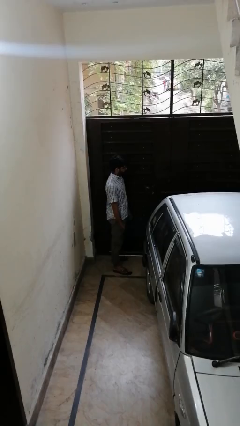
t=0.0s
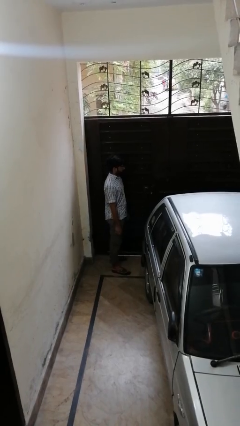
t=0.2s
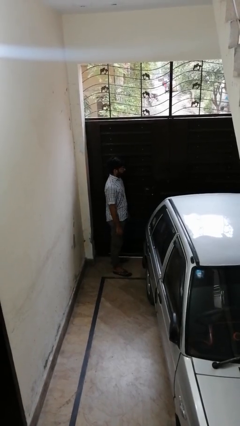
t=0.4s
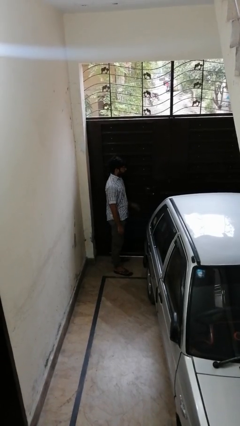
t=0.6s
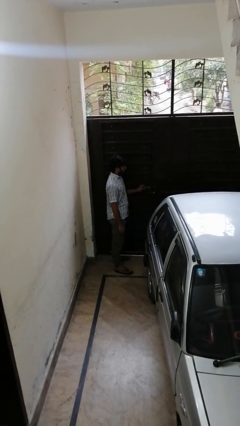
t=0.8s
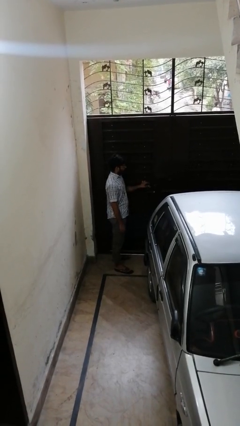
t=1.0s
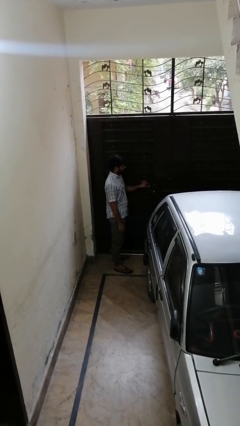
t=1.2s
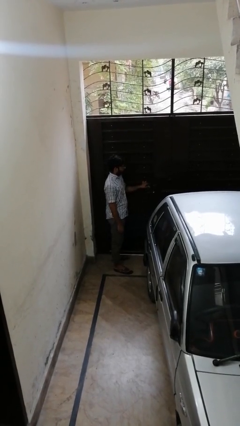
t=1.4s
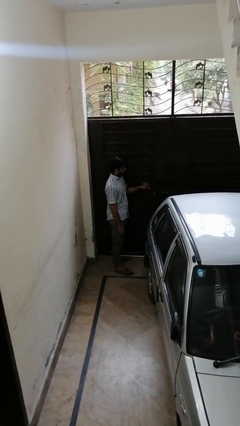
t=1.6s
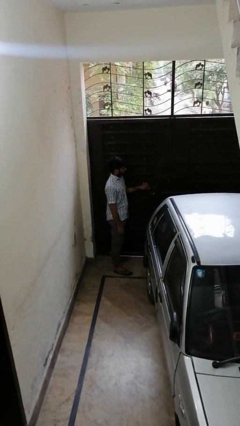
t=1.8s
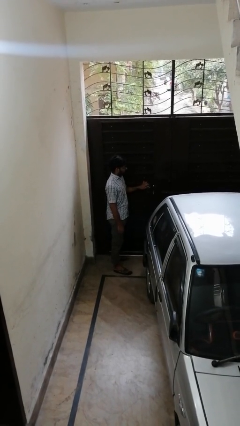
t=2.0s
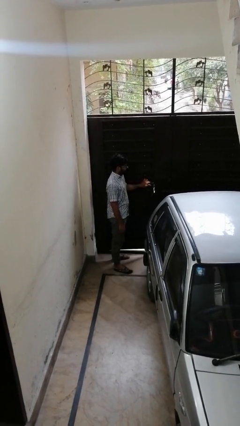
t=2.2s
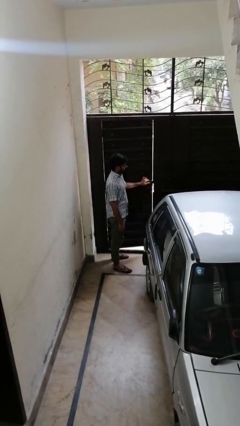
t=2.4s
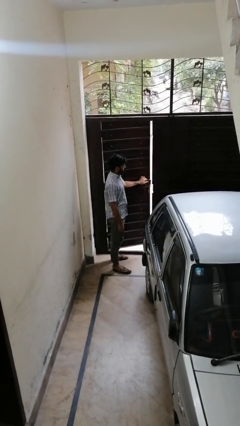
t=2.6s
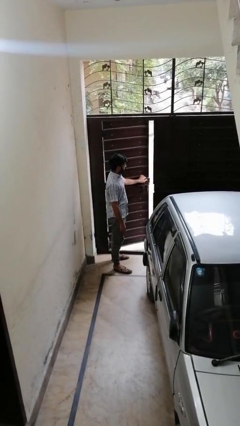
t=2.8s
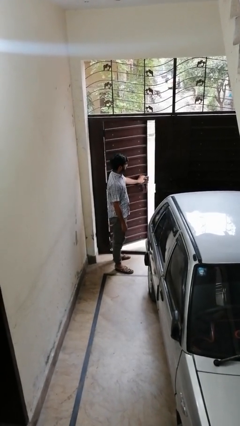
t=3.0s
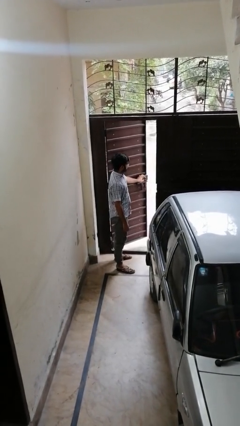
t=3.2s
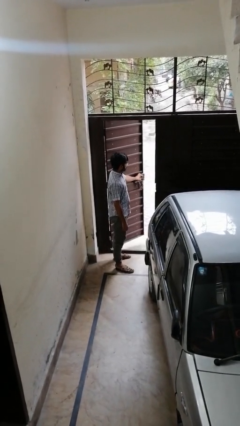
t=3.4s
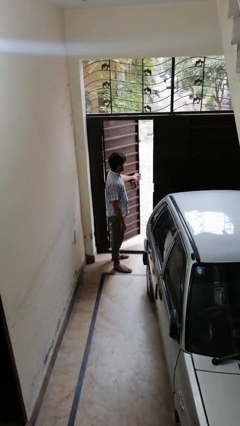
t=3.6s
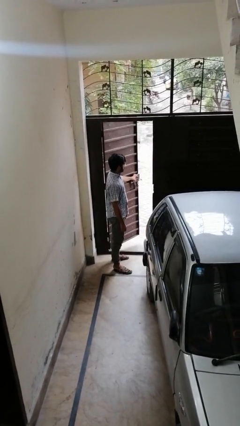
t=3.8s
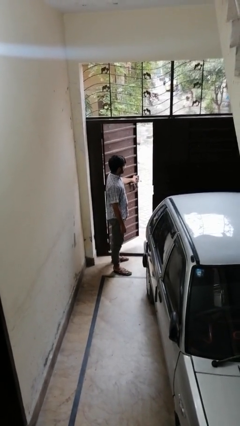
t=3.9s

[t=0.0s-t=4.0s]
person opens gate

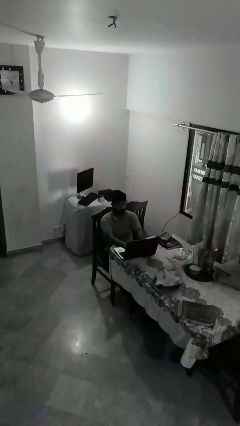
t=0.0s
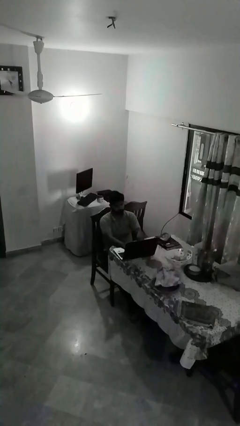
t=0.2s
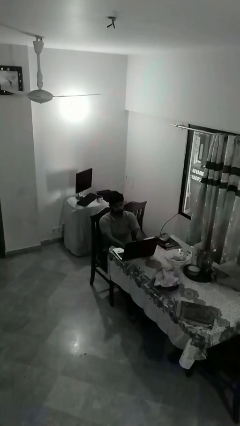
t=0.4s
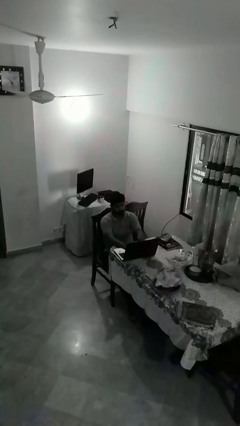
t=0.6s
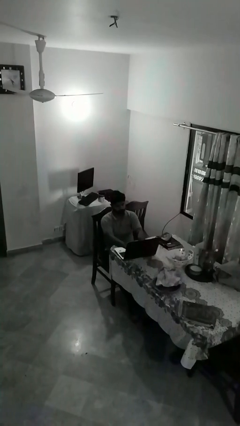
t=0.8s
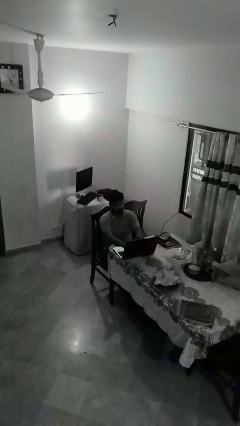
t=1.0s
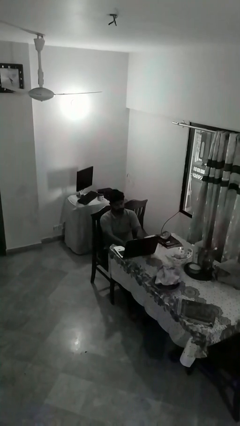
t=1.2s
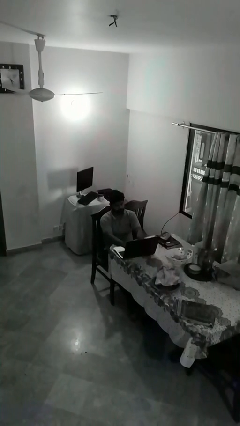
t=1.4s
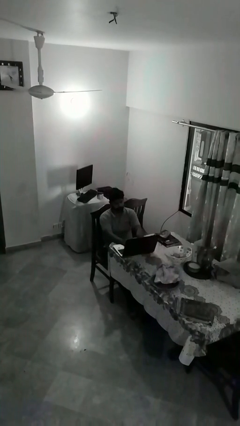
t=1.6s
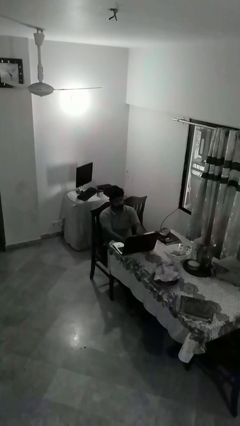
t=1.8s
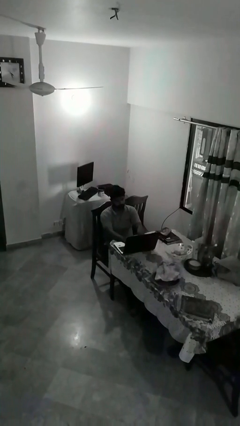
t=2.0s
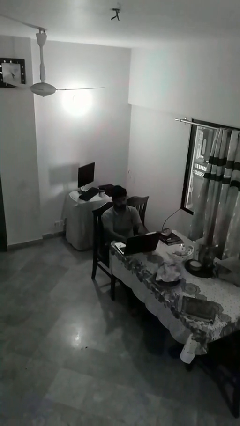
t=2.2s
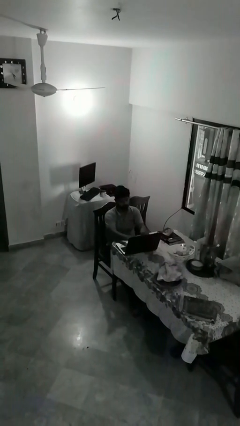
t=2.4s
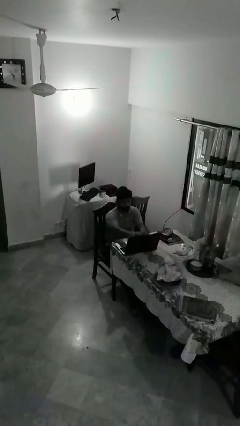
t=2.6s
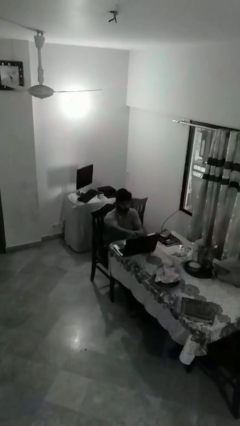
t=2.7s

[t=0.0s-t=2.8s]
person interacts with laptop

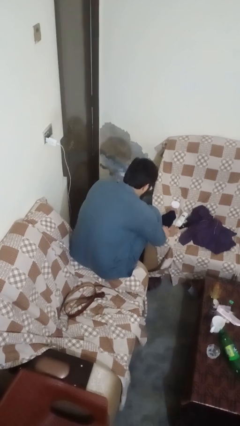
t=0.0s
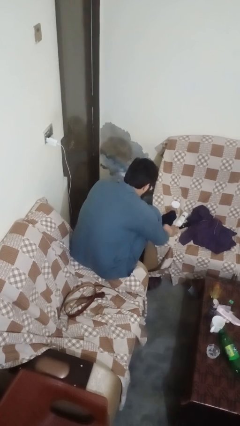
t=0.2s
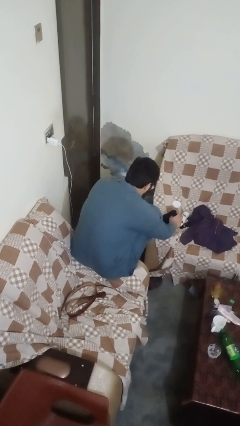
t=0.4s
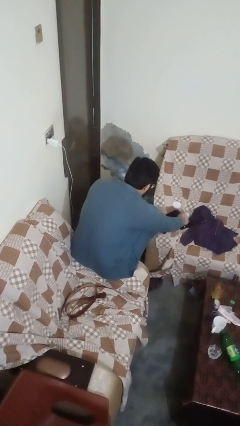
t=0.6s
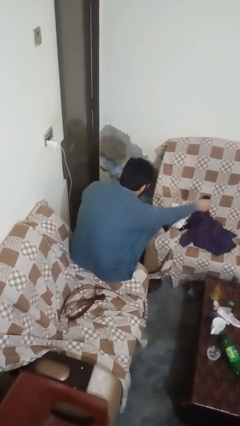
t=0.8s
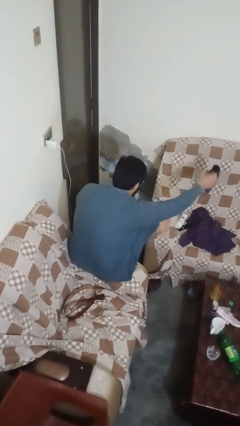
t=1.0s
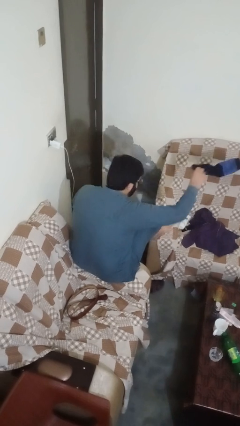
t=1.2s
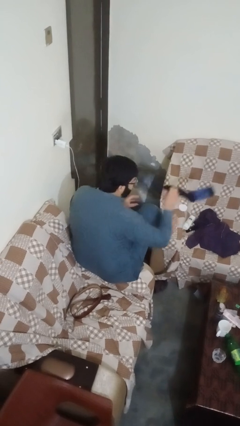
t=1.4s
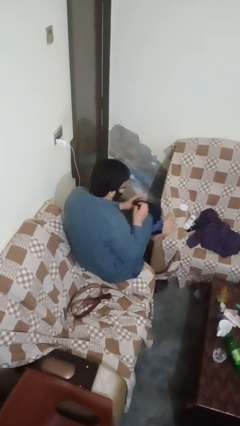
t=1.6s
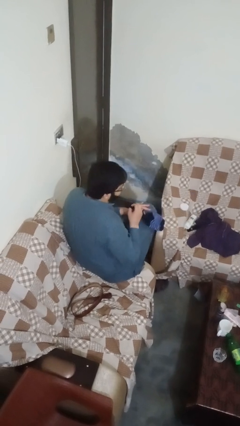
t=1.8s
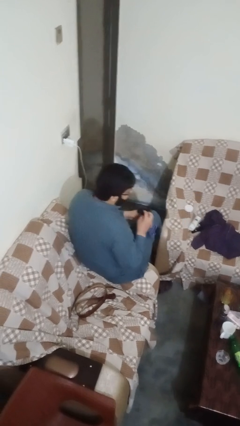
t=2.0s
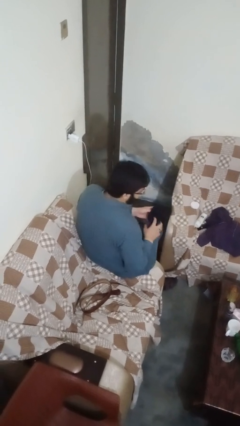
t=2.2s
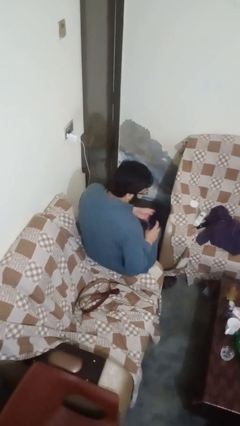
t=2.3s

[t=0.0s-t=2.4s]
person takes off socks

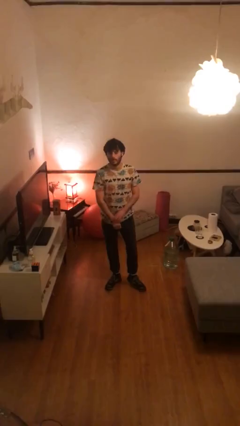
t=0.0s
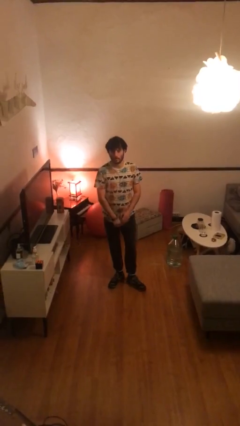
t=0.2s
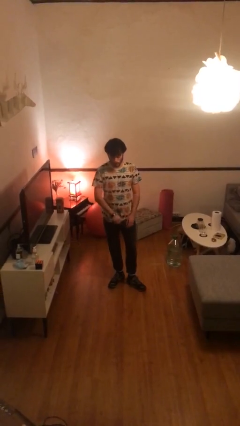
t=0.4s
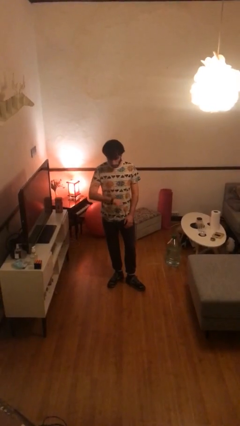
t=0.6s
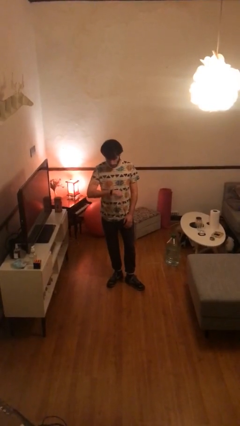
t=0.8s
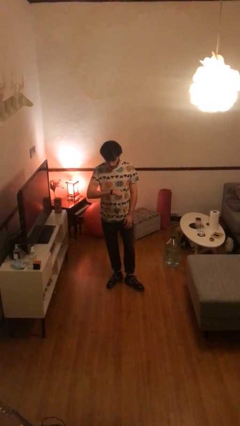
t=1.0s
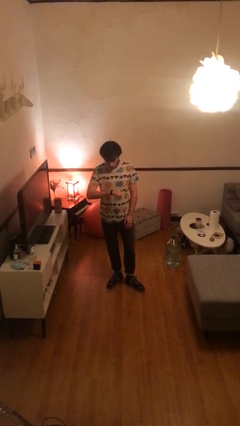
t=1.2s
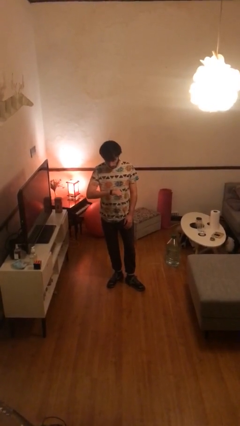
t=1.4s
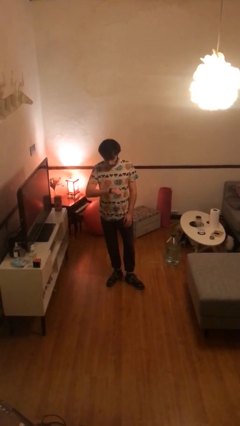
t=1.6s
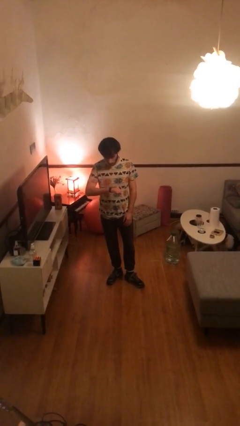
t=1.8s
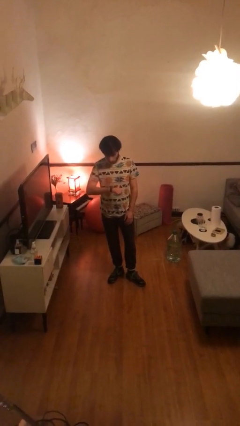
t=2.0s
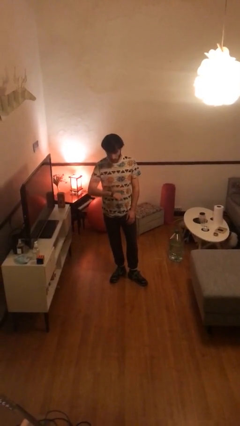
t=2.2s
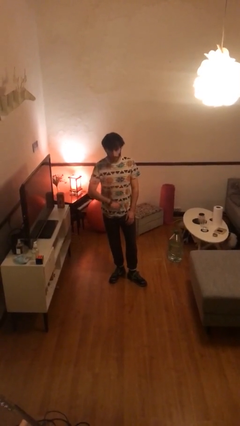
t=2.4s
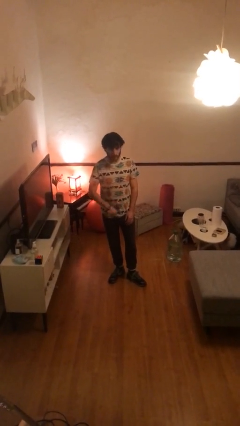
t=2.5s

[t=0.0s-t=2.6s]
person looks at wristwatch

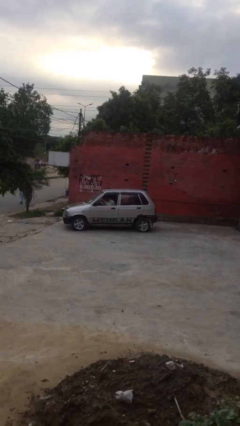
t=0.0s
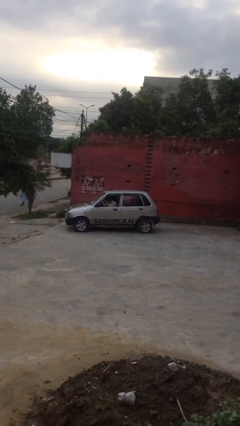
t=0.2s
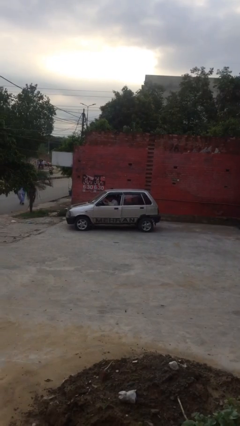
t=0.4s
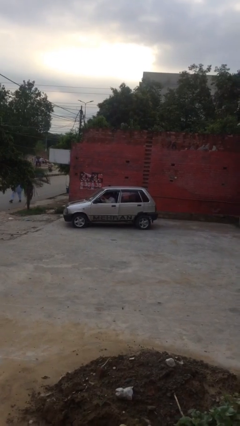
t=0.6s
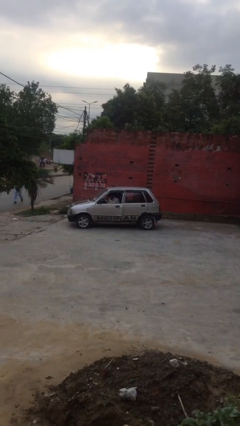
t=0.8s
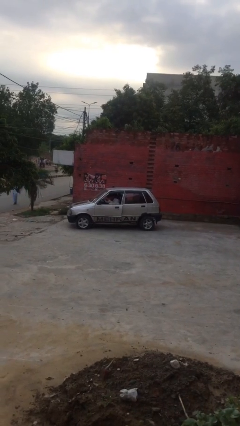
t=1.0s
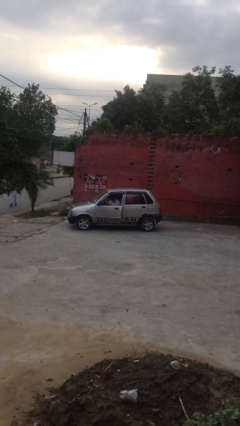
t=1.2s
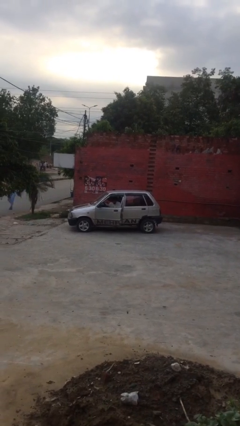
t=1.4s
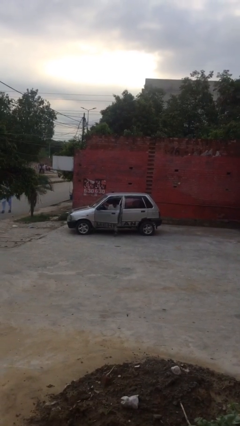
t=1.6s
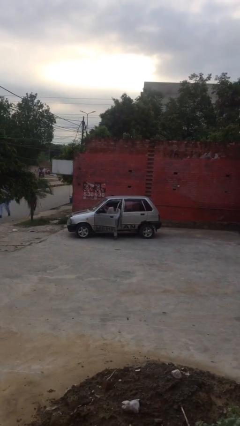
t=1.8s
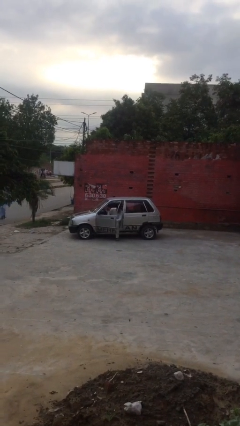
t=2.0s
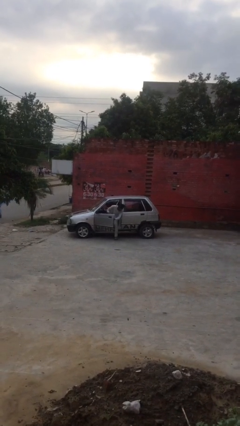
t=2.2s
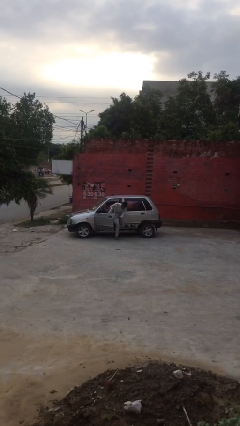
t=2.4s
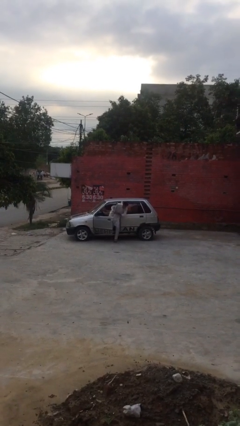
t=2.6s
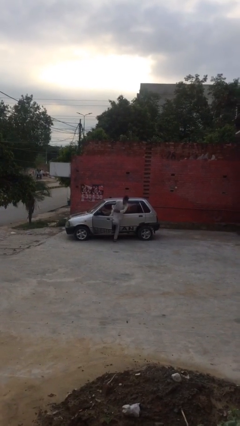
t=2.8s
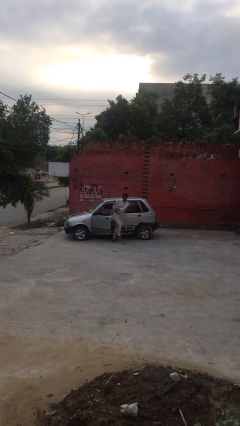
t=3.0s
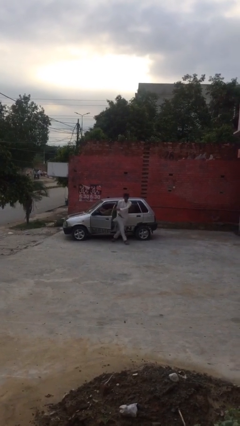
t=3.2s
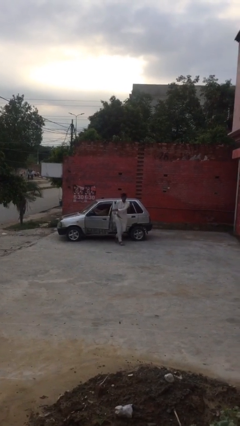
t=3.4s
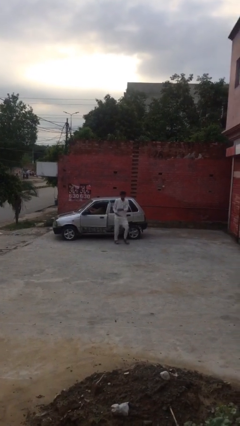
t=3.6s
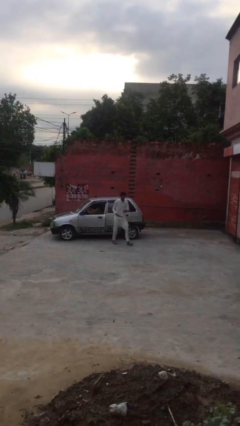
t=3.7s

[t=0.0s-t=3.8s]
car drops off person

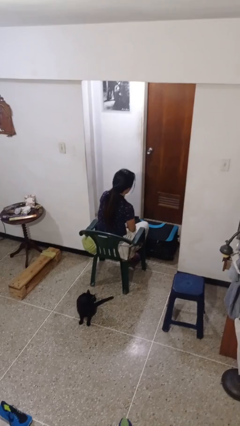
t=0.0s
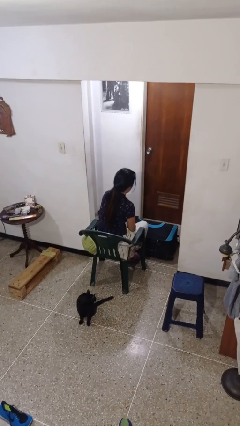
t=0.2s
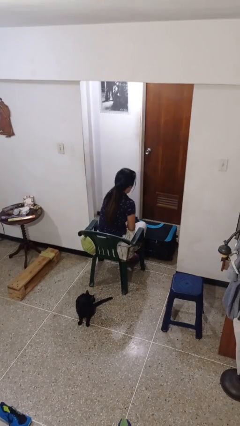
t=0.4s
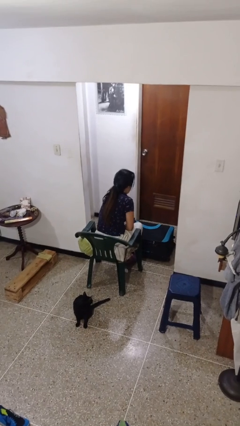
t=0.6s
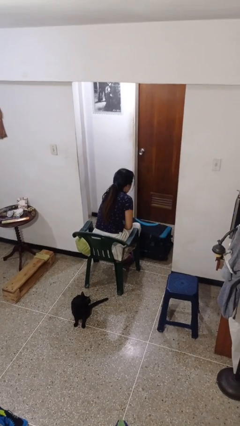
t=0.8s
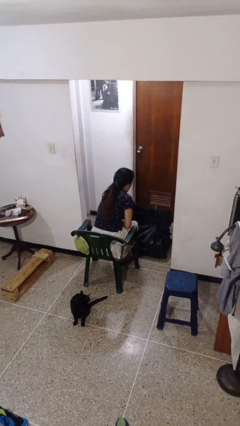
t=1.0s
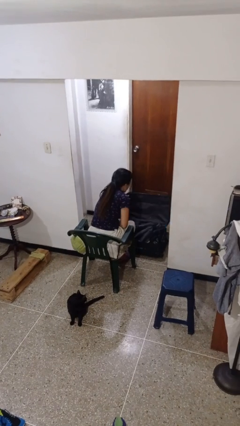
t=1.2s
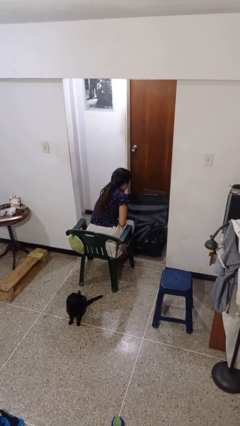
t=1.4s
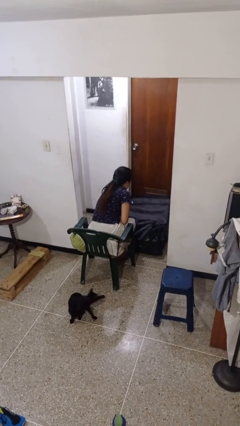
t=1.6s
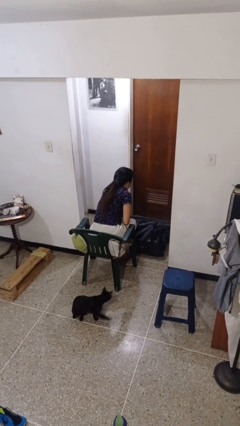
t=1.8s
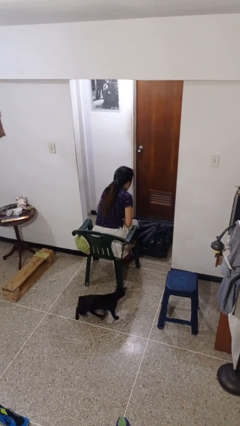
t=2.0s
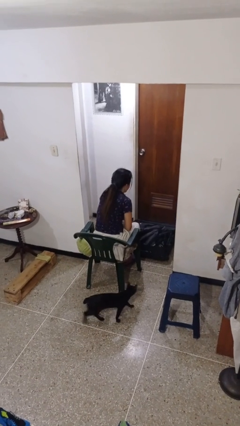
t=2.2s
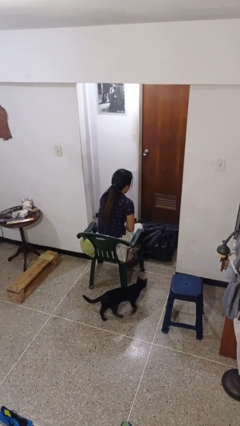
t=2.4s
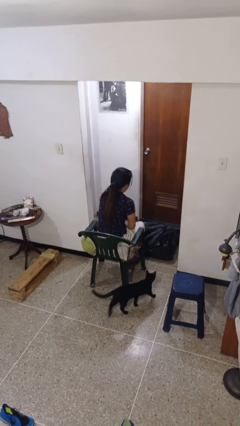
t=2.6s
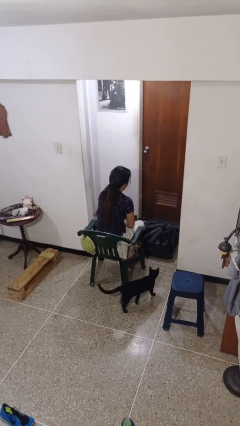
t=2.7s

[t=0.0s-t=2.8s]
person opens suitcase
